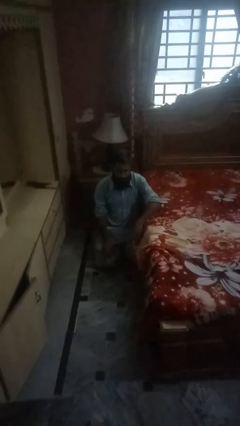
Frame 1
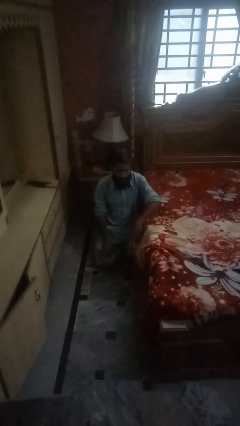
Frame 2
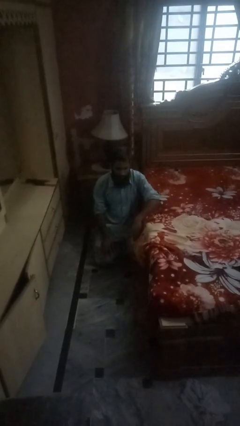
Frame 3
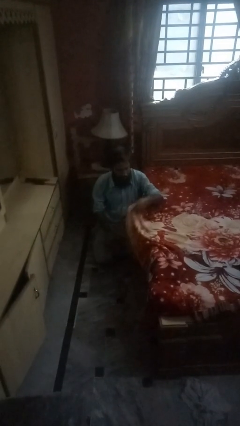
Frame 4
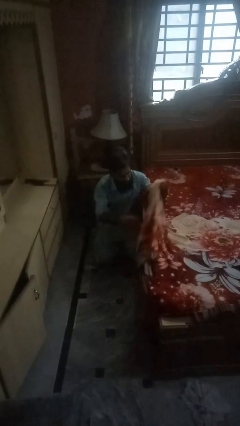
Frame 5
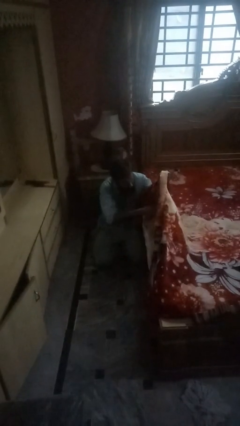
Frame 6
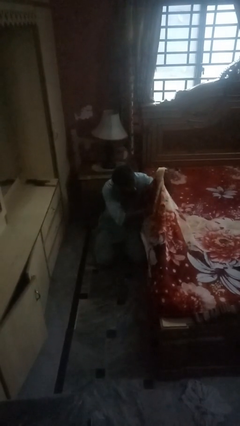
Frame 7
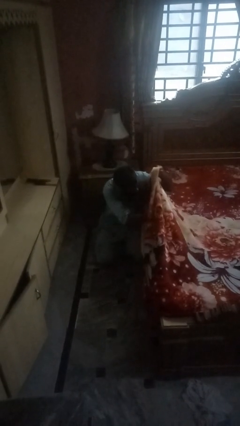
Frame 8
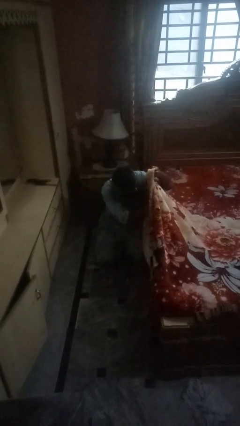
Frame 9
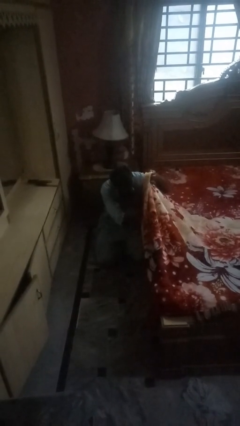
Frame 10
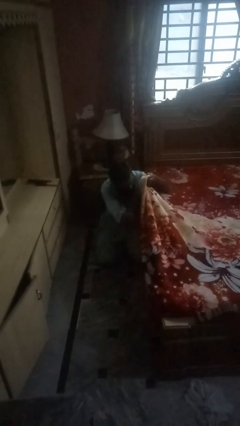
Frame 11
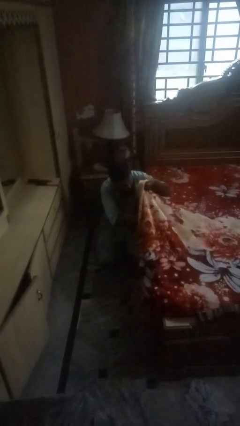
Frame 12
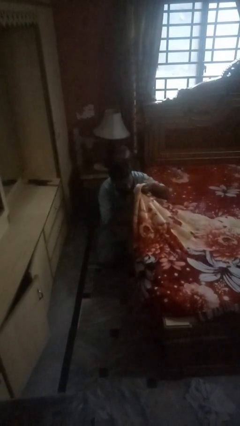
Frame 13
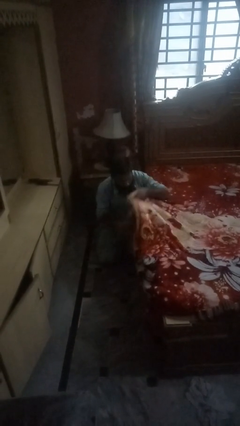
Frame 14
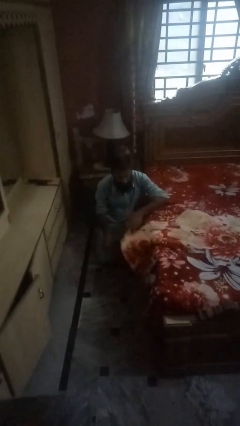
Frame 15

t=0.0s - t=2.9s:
person searches under bed

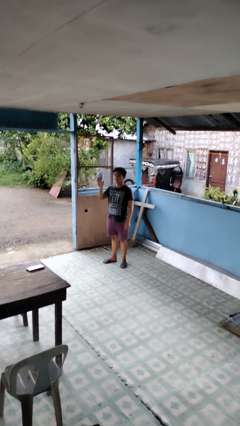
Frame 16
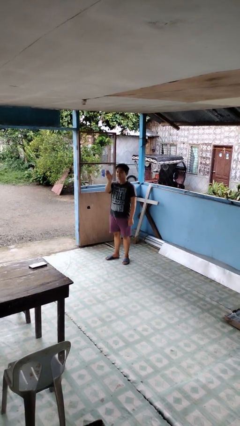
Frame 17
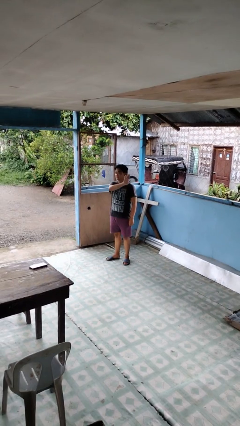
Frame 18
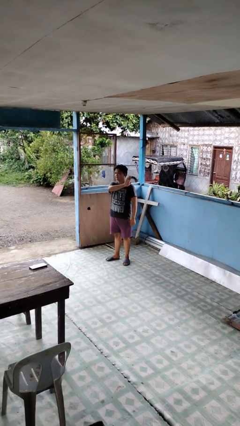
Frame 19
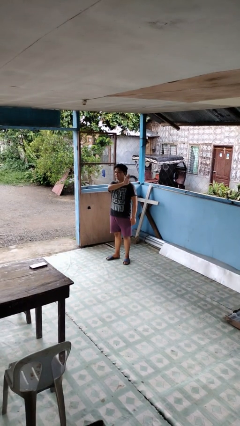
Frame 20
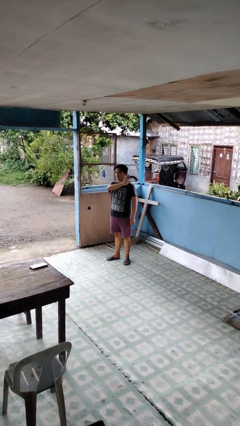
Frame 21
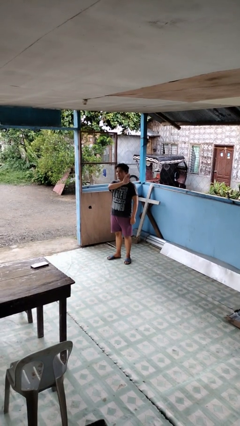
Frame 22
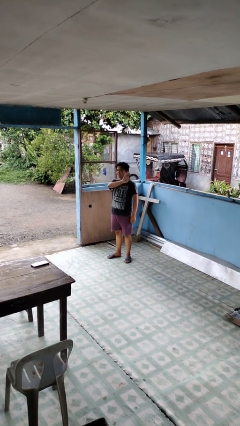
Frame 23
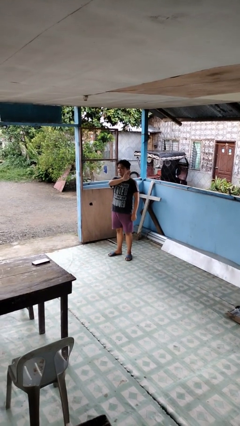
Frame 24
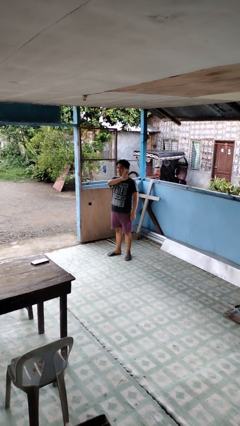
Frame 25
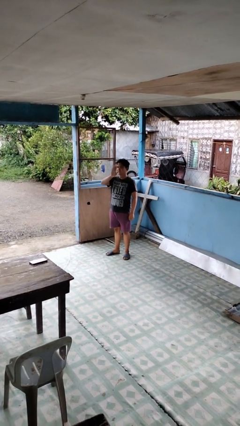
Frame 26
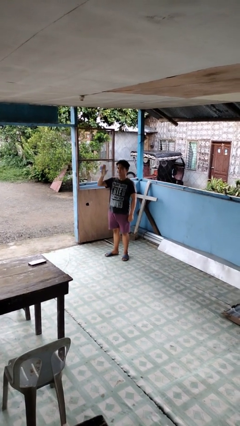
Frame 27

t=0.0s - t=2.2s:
person gestures swipe left

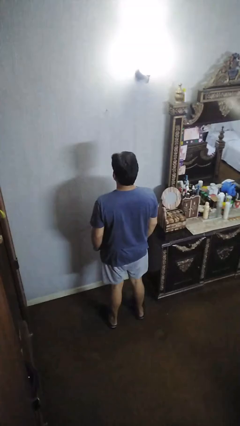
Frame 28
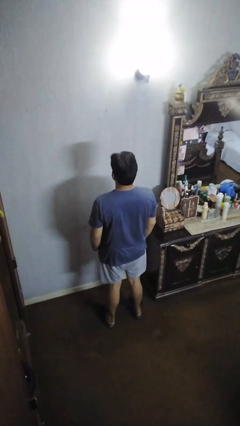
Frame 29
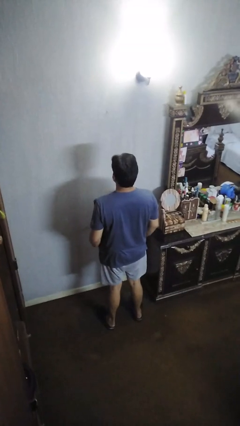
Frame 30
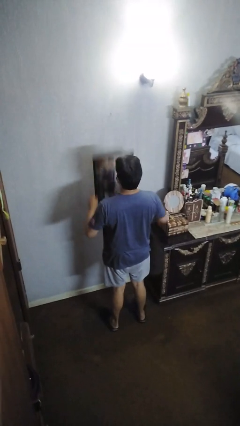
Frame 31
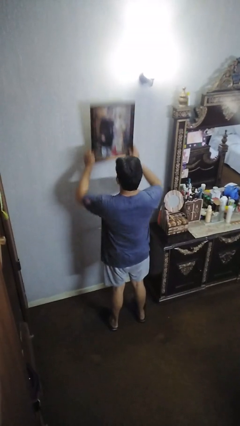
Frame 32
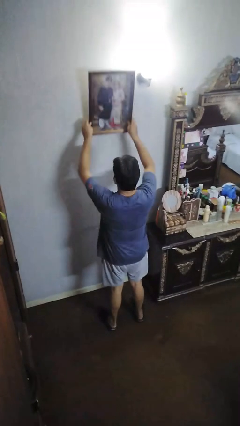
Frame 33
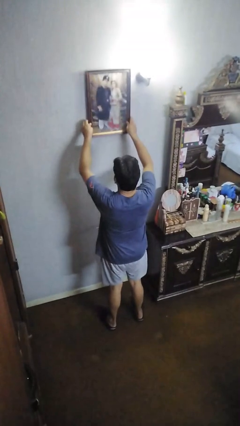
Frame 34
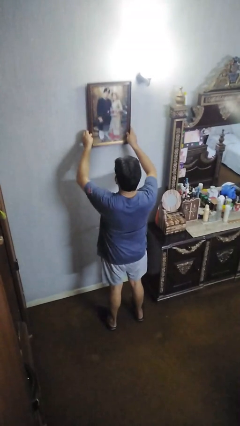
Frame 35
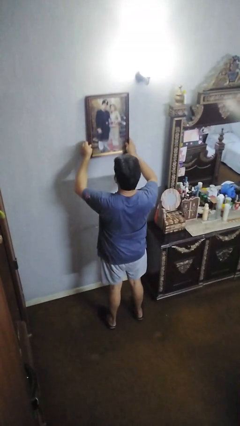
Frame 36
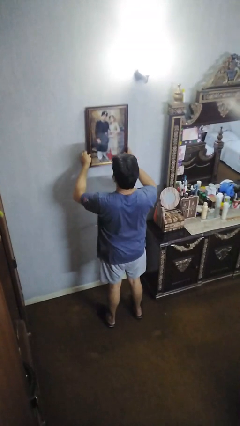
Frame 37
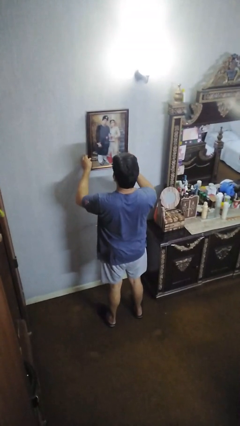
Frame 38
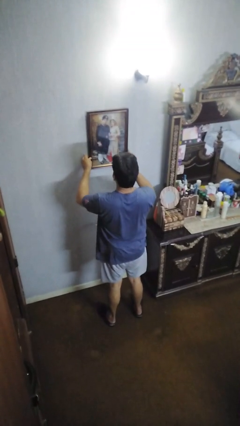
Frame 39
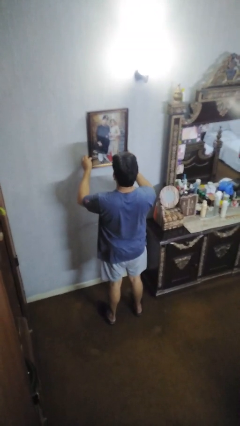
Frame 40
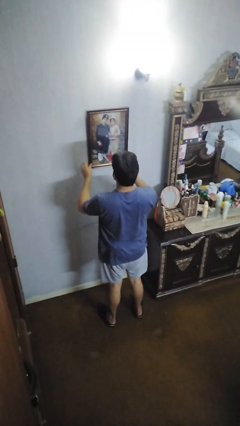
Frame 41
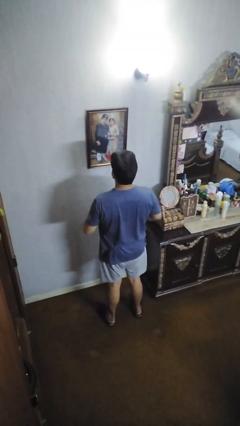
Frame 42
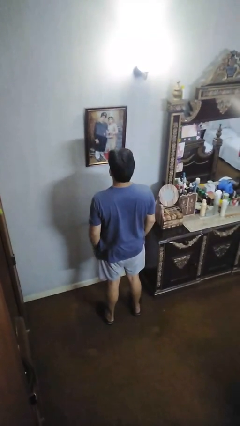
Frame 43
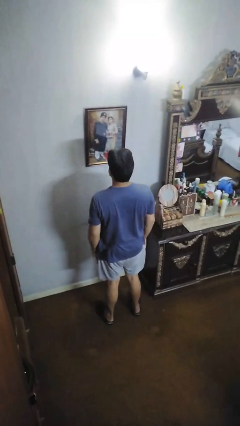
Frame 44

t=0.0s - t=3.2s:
person puts up picture frame

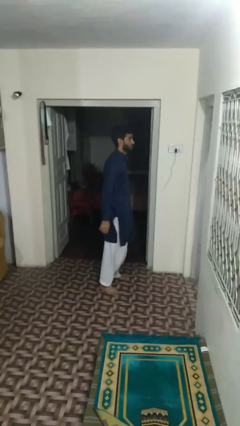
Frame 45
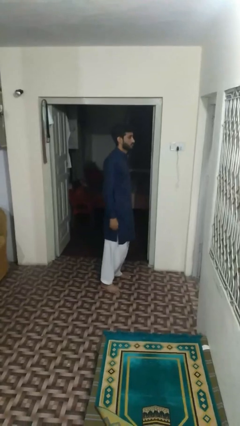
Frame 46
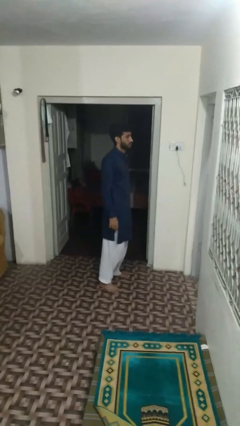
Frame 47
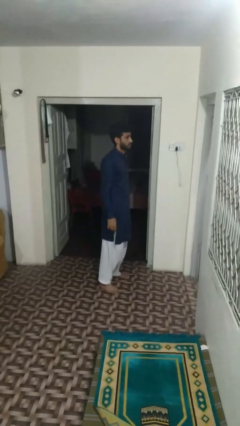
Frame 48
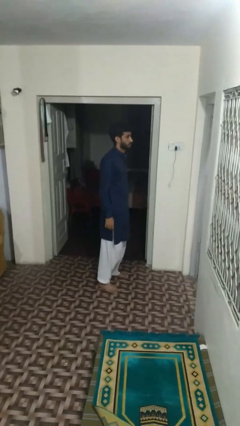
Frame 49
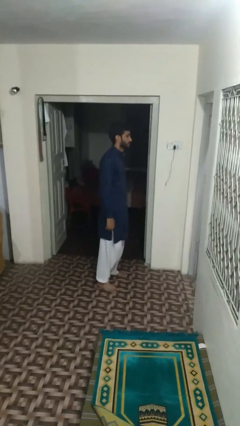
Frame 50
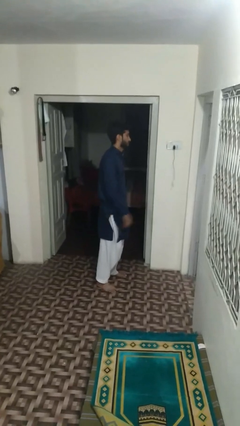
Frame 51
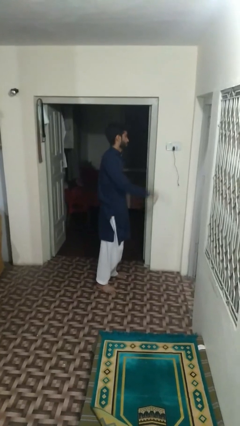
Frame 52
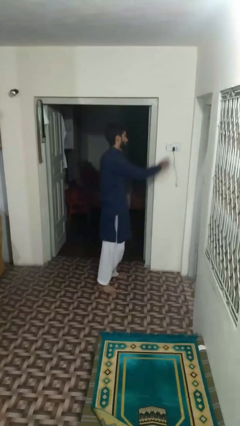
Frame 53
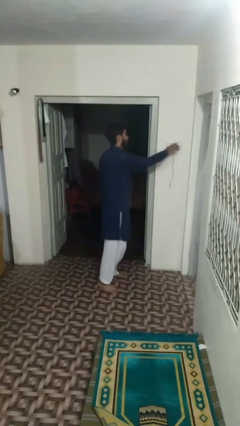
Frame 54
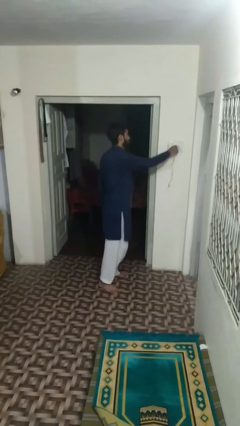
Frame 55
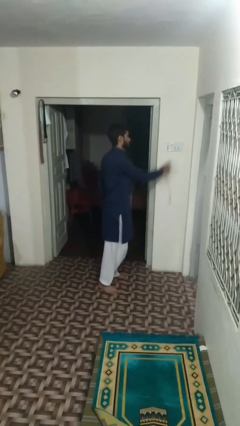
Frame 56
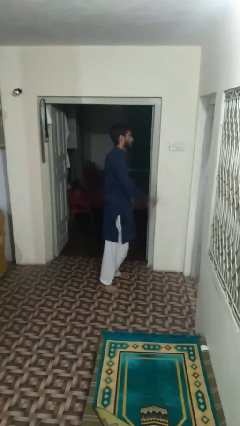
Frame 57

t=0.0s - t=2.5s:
person unplugs from electrical socket

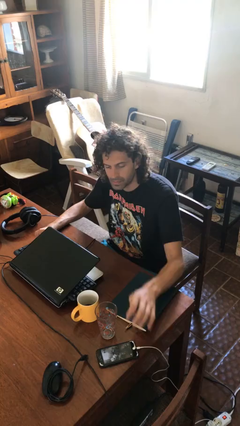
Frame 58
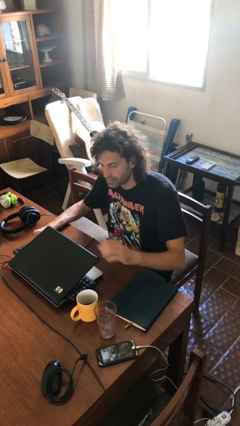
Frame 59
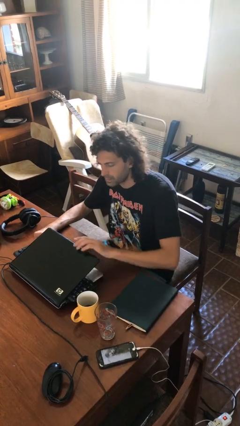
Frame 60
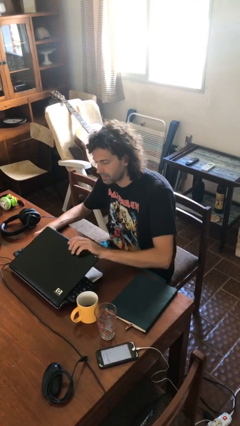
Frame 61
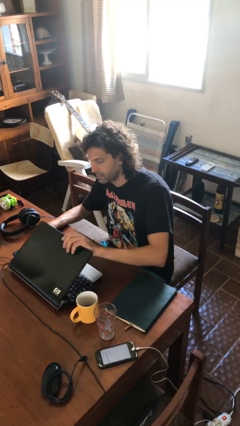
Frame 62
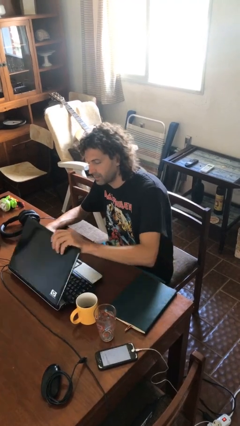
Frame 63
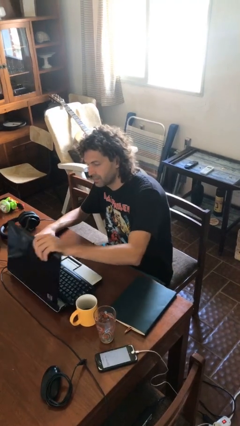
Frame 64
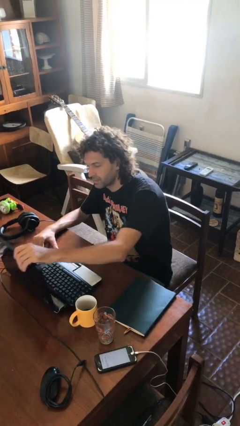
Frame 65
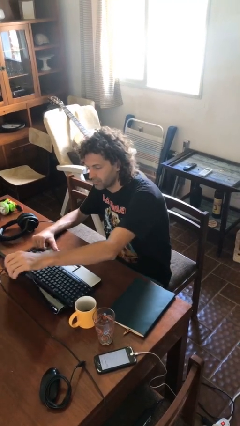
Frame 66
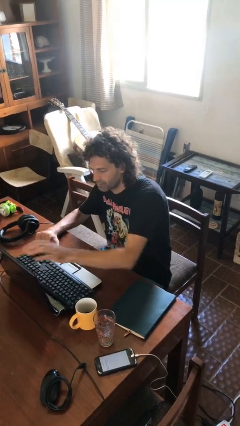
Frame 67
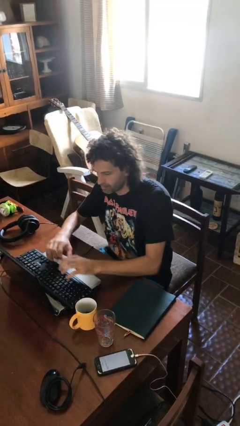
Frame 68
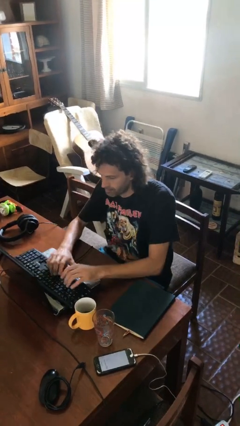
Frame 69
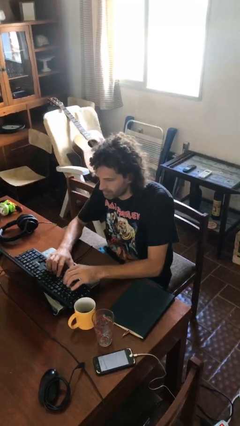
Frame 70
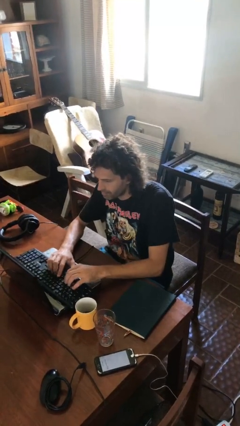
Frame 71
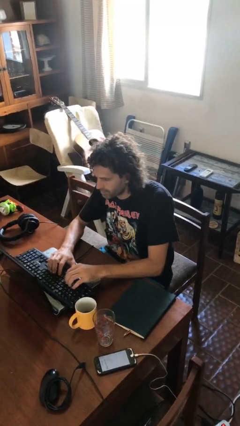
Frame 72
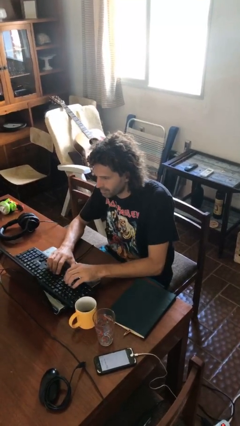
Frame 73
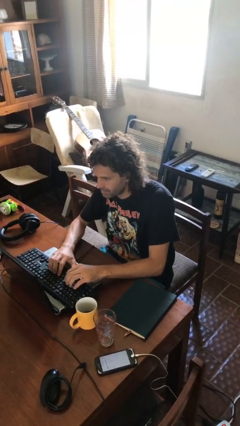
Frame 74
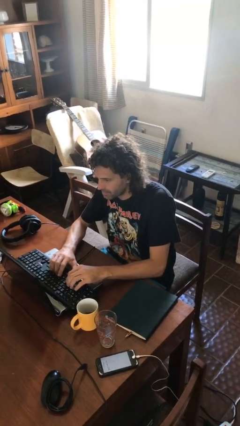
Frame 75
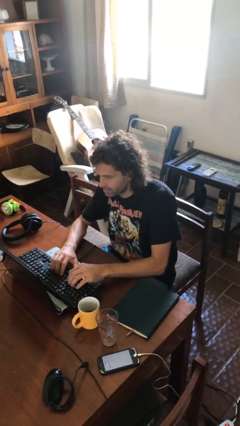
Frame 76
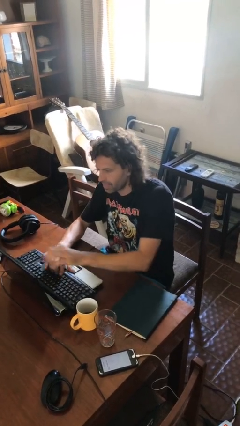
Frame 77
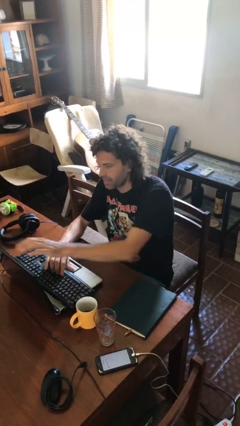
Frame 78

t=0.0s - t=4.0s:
person interacts with laptop

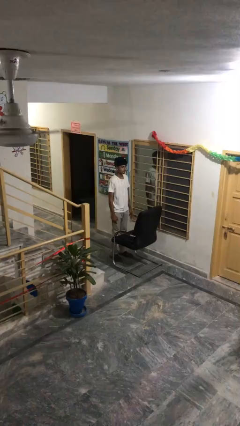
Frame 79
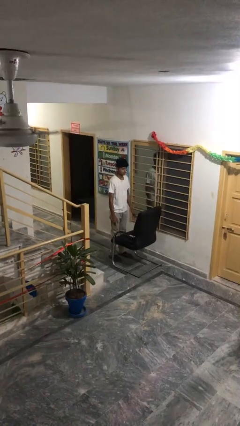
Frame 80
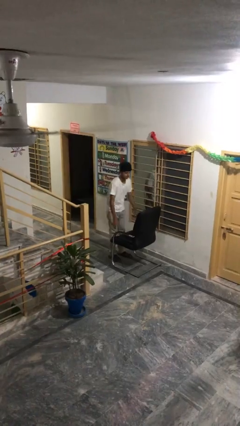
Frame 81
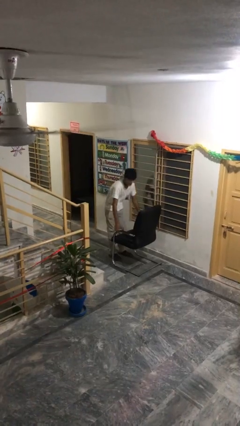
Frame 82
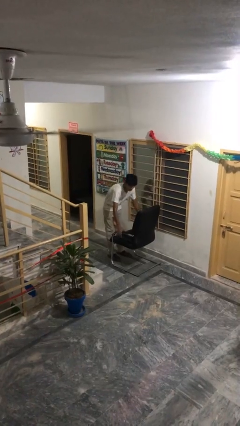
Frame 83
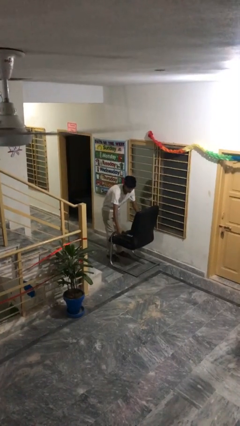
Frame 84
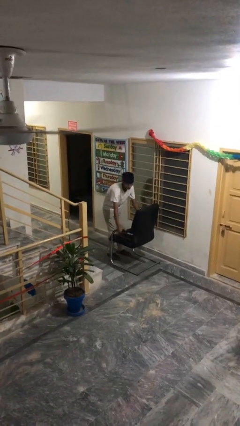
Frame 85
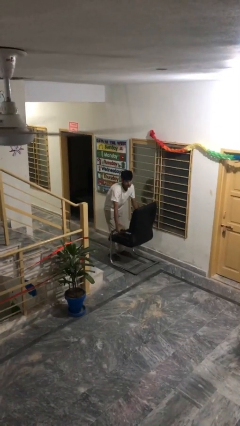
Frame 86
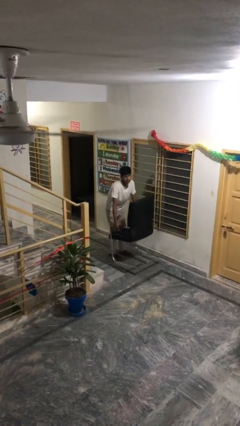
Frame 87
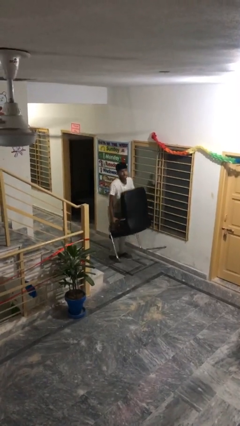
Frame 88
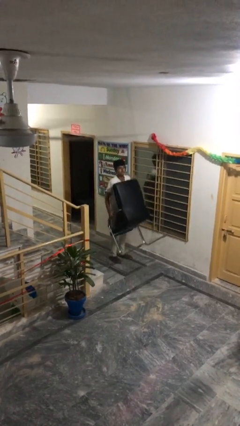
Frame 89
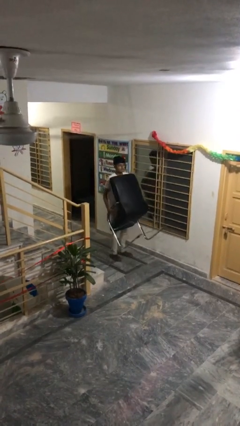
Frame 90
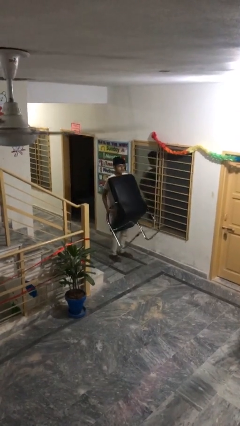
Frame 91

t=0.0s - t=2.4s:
person picks up object from floor
